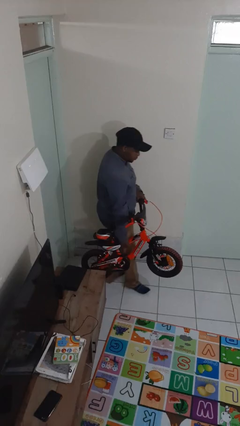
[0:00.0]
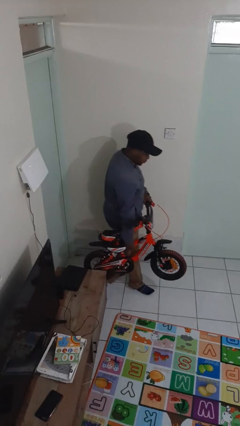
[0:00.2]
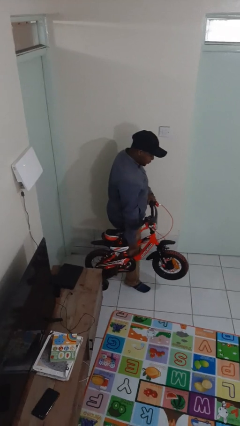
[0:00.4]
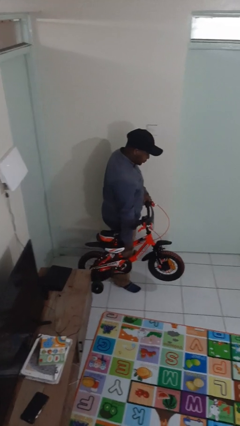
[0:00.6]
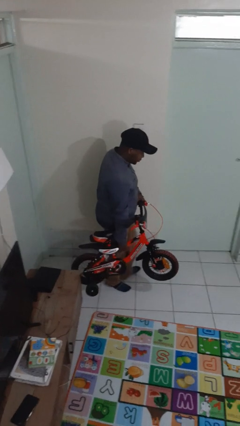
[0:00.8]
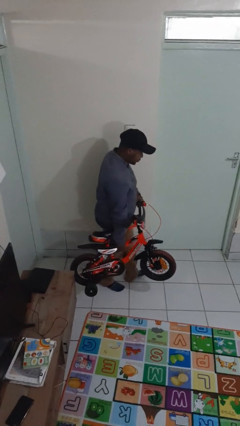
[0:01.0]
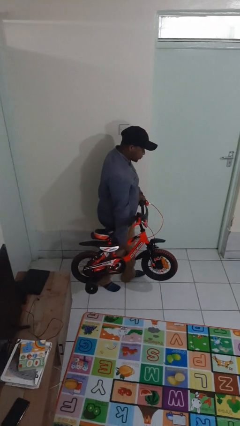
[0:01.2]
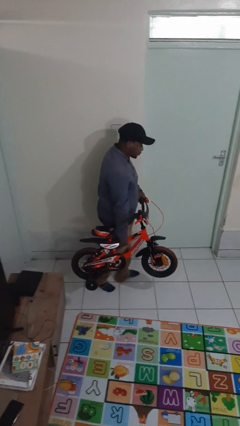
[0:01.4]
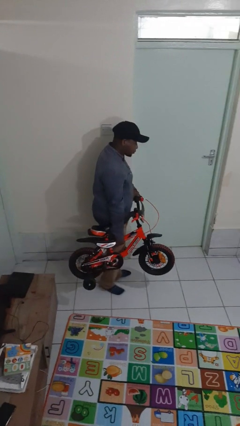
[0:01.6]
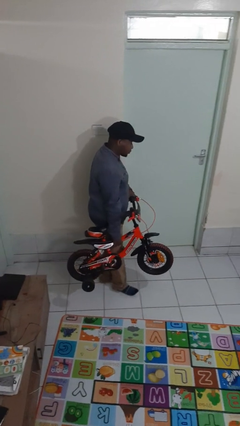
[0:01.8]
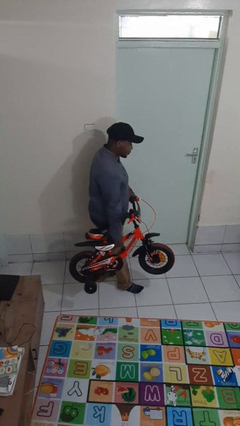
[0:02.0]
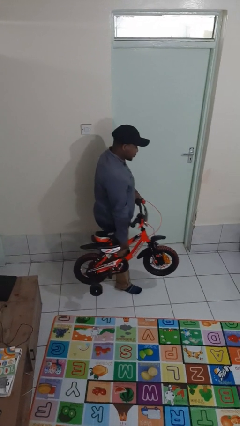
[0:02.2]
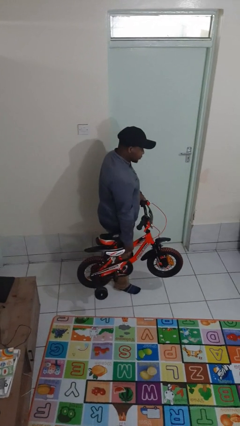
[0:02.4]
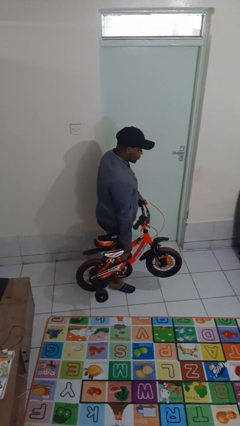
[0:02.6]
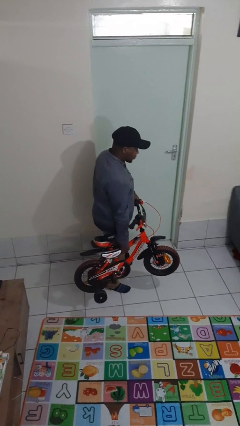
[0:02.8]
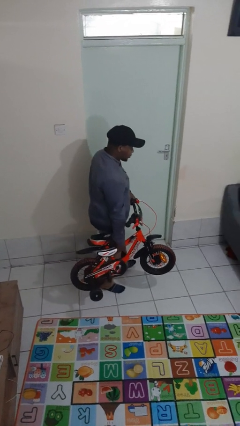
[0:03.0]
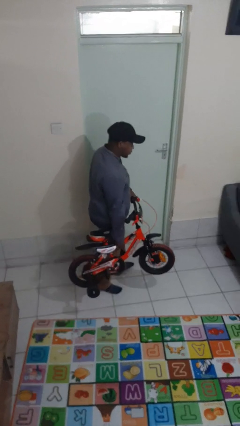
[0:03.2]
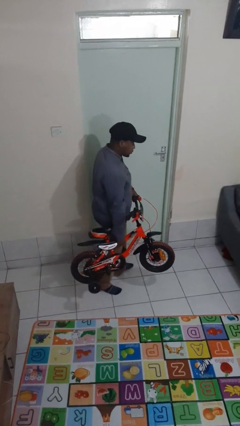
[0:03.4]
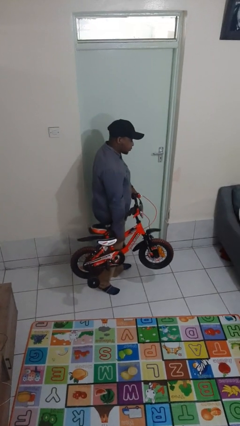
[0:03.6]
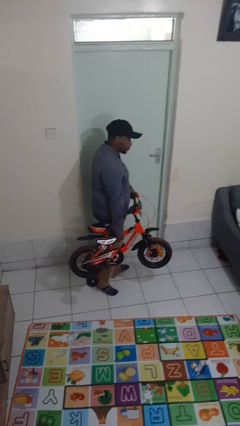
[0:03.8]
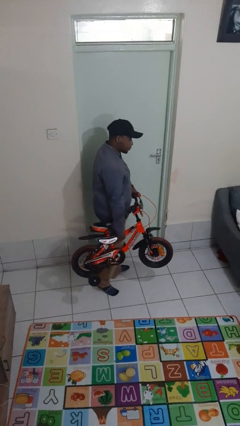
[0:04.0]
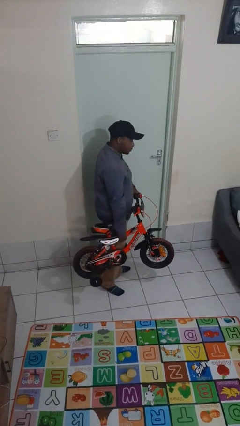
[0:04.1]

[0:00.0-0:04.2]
person carries bicycle

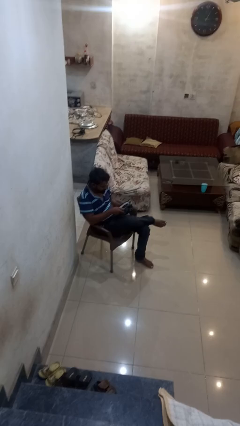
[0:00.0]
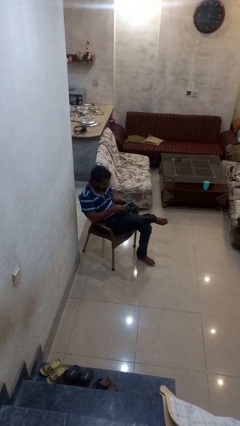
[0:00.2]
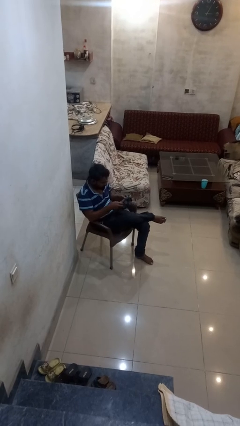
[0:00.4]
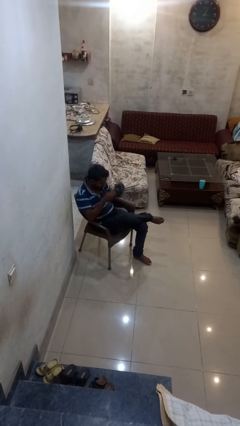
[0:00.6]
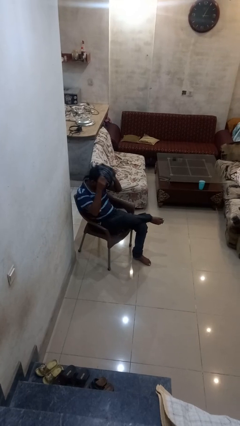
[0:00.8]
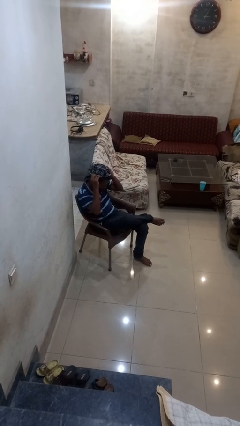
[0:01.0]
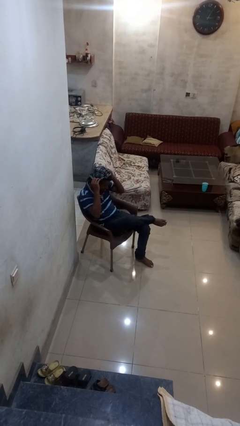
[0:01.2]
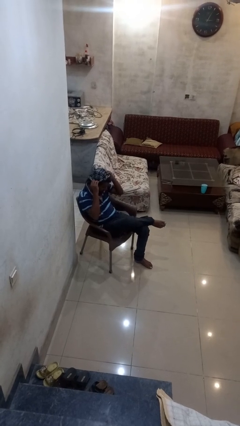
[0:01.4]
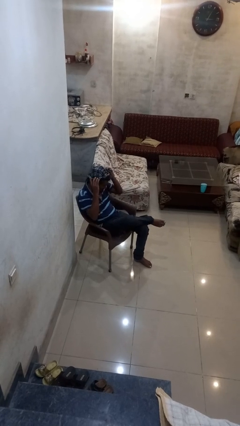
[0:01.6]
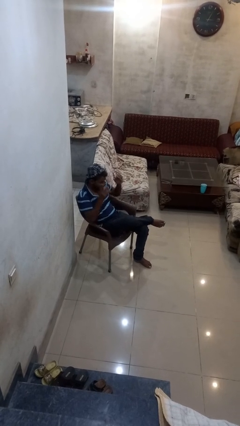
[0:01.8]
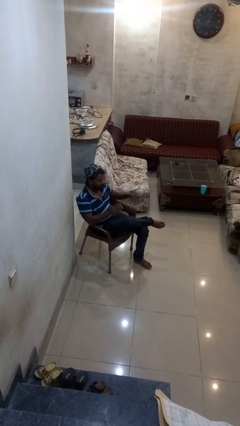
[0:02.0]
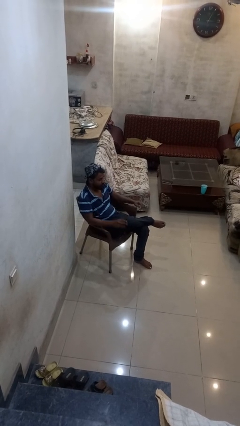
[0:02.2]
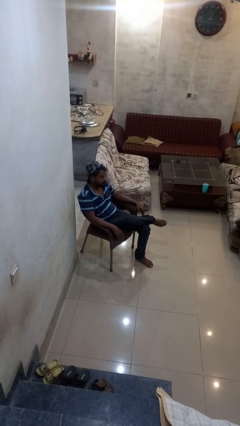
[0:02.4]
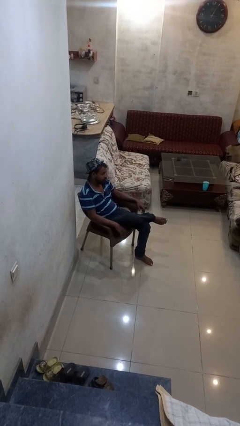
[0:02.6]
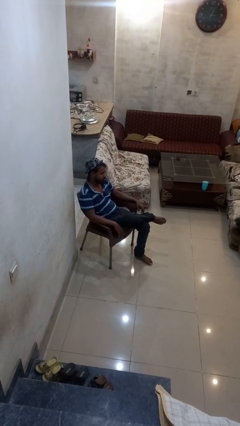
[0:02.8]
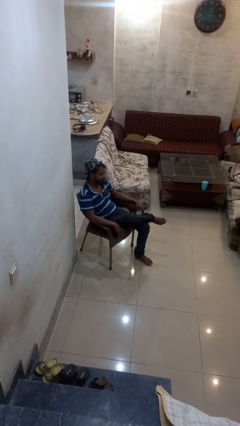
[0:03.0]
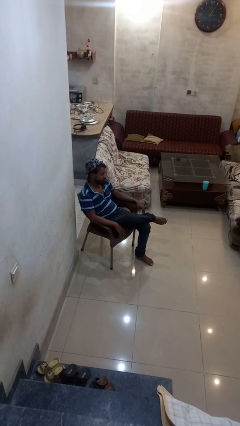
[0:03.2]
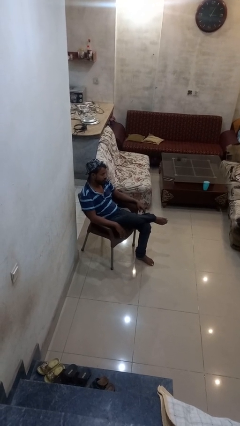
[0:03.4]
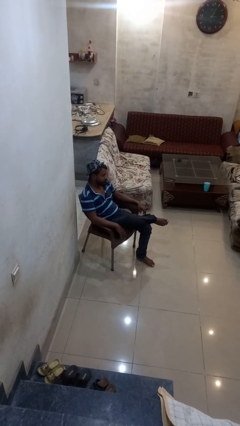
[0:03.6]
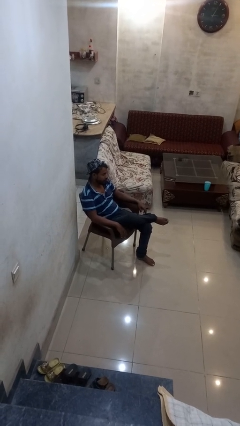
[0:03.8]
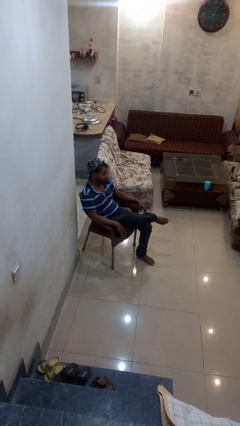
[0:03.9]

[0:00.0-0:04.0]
person puts on hat

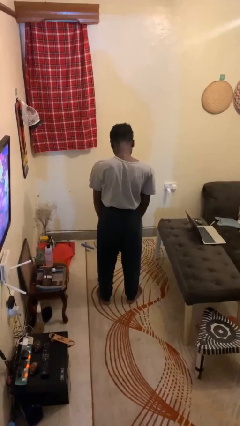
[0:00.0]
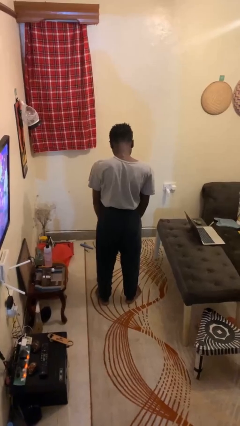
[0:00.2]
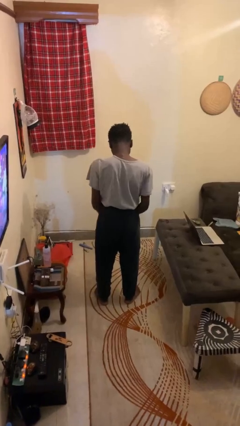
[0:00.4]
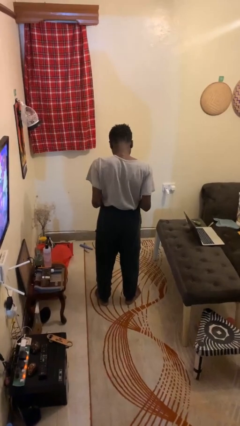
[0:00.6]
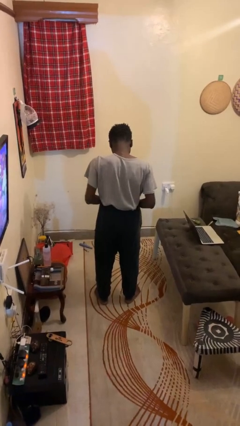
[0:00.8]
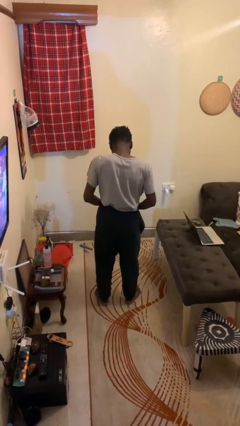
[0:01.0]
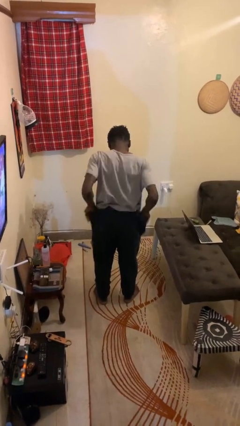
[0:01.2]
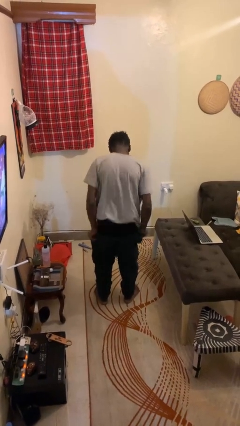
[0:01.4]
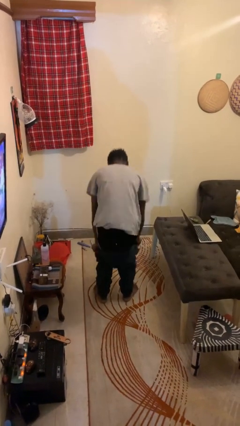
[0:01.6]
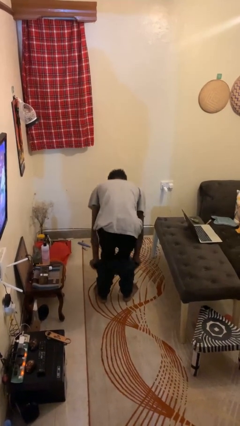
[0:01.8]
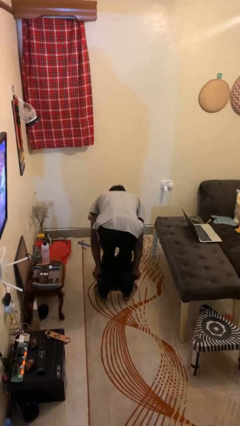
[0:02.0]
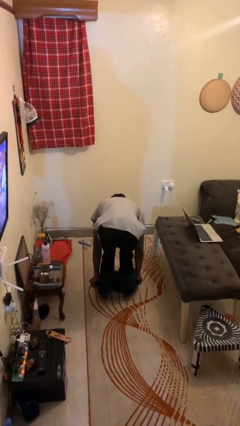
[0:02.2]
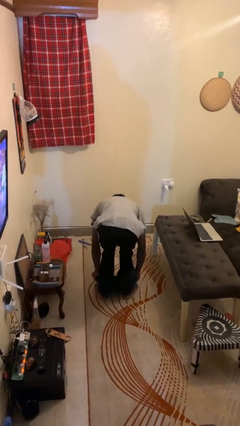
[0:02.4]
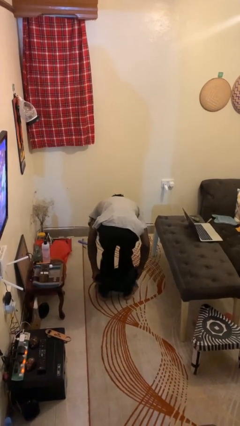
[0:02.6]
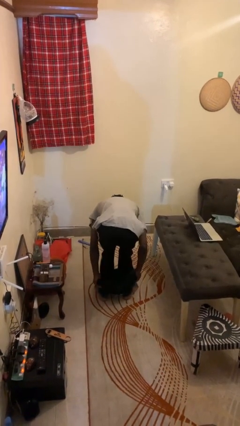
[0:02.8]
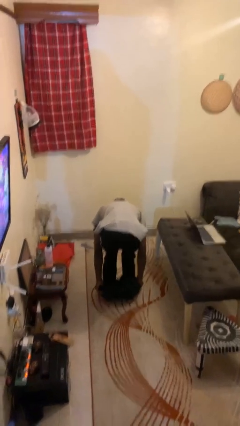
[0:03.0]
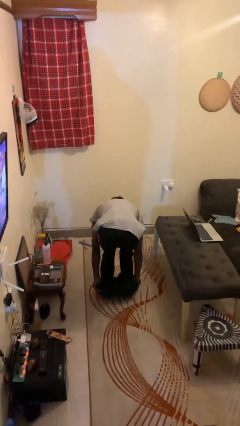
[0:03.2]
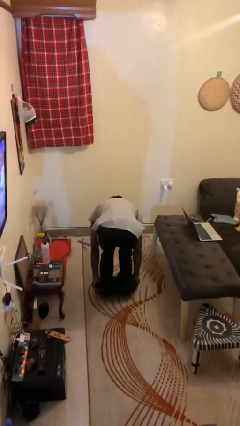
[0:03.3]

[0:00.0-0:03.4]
person takes off pants

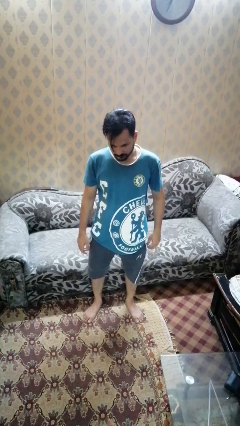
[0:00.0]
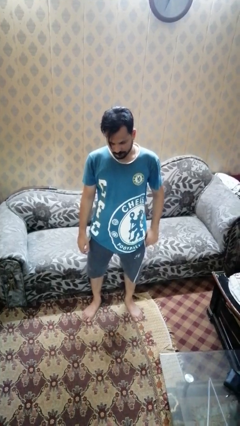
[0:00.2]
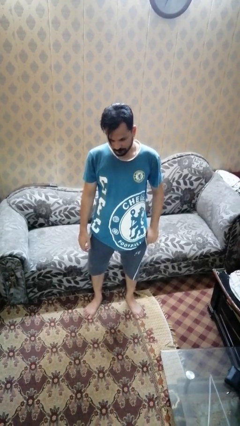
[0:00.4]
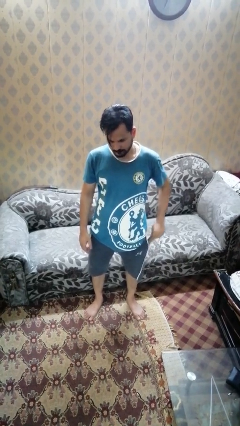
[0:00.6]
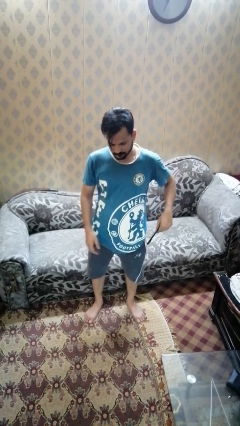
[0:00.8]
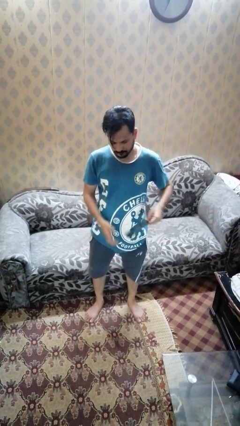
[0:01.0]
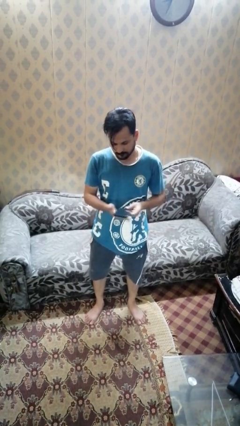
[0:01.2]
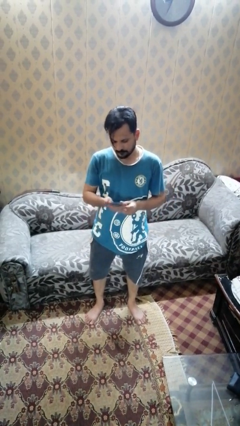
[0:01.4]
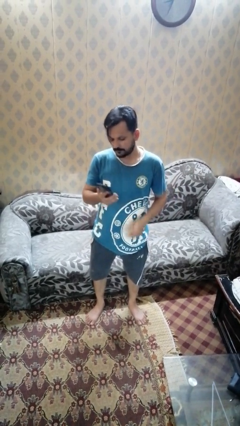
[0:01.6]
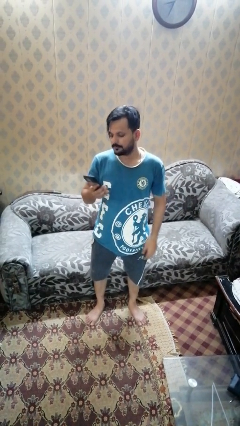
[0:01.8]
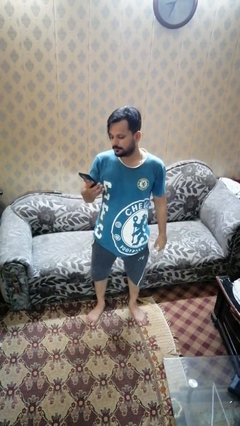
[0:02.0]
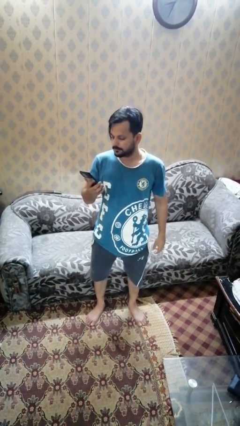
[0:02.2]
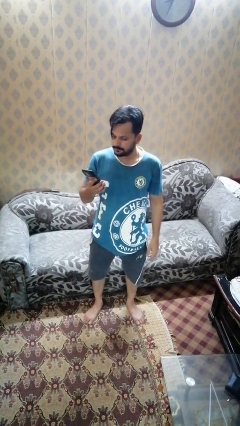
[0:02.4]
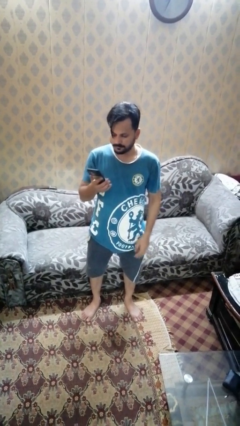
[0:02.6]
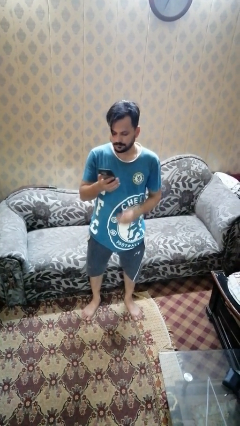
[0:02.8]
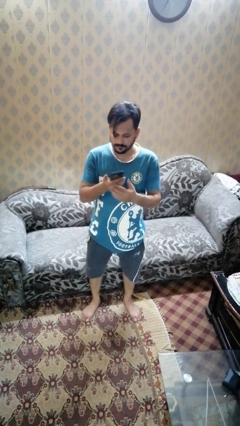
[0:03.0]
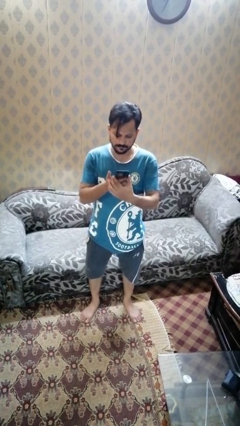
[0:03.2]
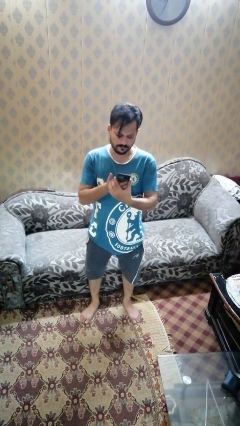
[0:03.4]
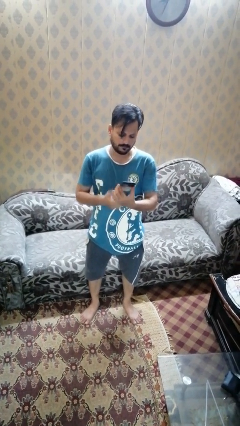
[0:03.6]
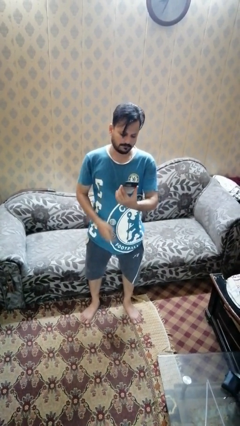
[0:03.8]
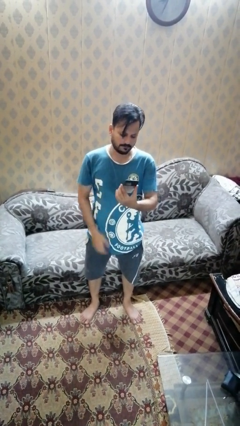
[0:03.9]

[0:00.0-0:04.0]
person takes phone from pocket

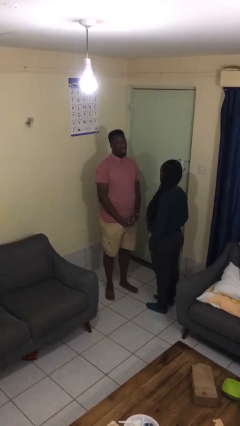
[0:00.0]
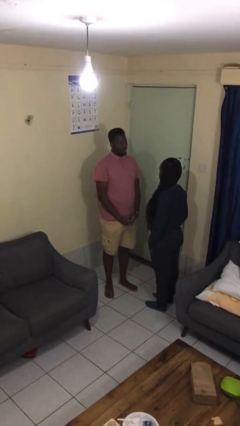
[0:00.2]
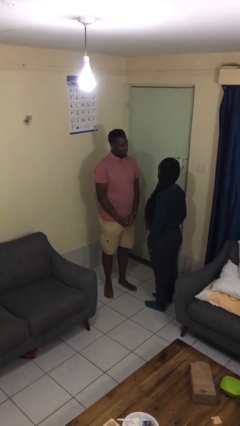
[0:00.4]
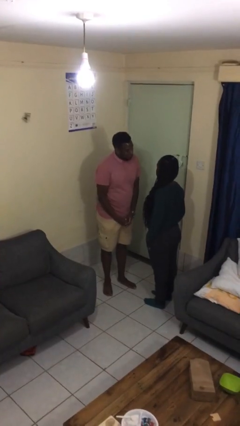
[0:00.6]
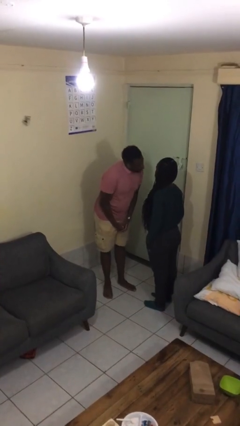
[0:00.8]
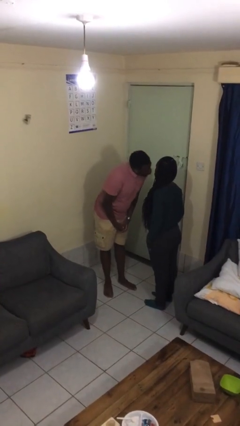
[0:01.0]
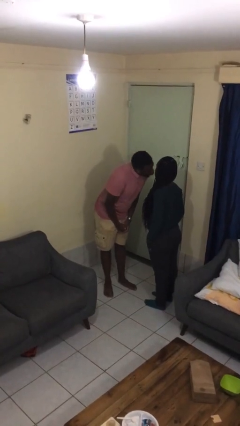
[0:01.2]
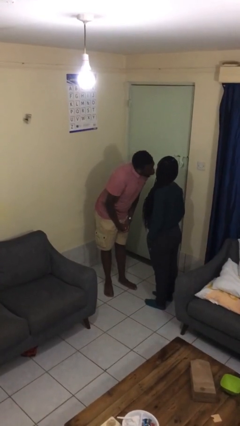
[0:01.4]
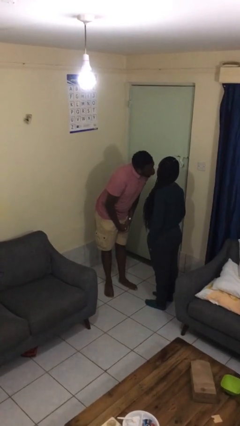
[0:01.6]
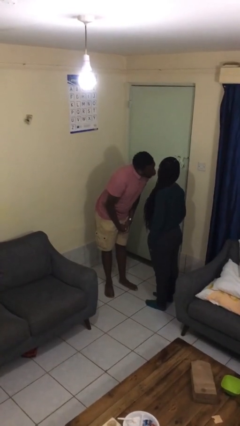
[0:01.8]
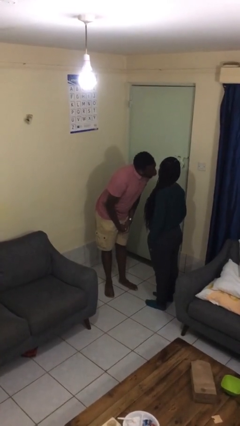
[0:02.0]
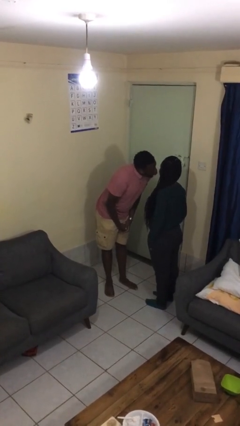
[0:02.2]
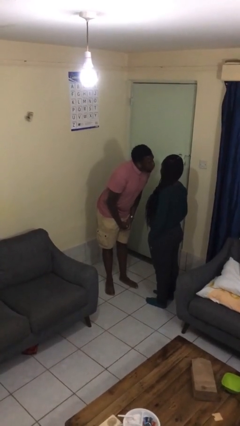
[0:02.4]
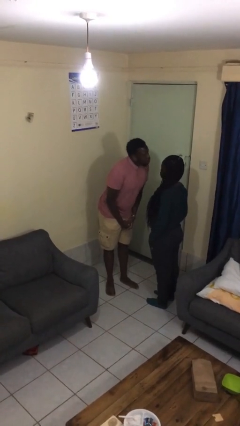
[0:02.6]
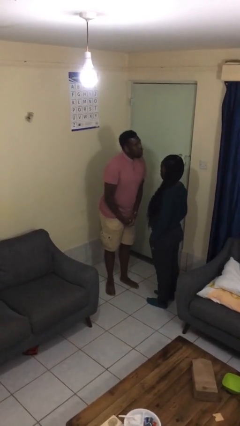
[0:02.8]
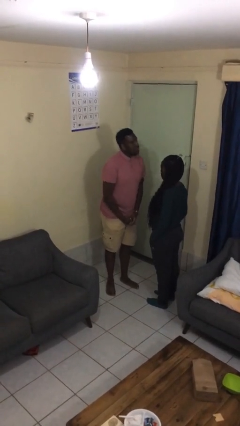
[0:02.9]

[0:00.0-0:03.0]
person kisses cheek of person
